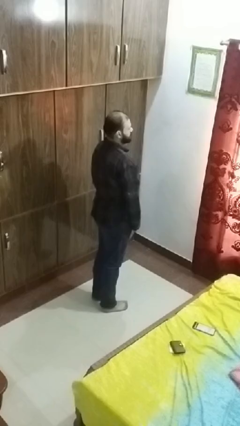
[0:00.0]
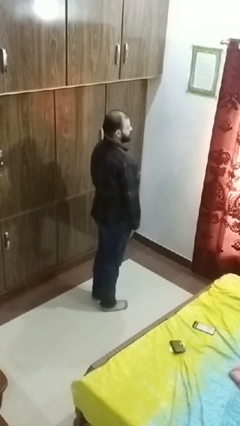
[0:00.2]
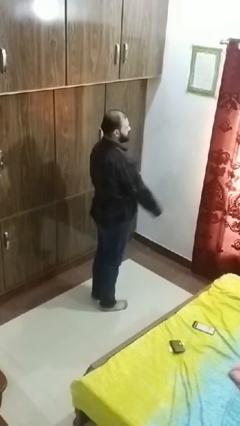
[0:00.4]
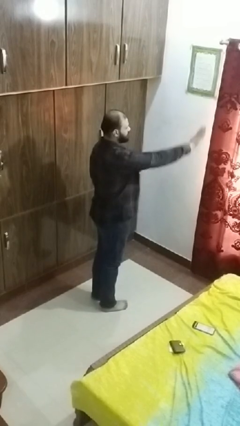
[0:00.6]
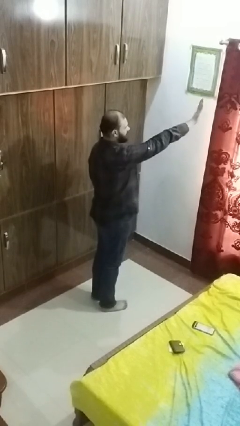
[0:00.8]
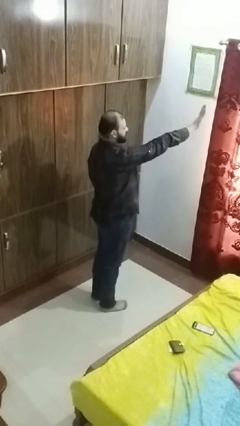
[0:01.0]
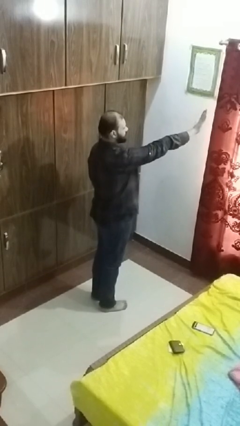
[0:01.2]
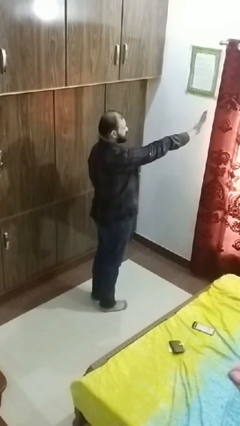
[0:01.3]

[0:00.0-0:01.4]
person gestures stop

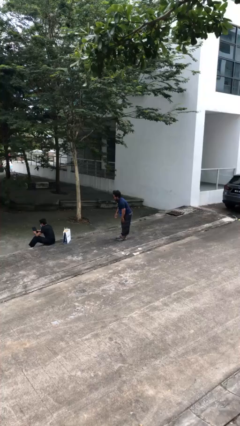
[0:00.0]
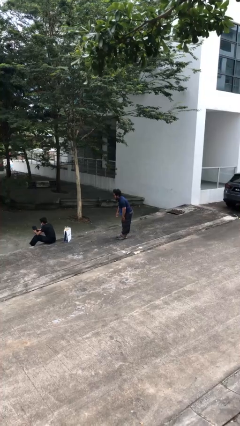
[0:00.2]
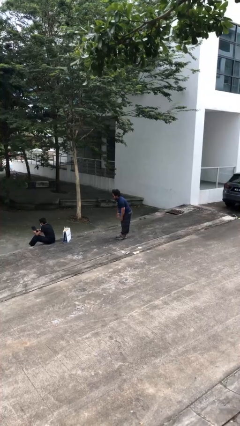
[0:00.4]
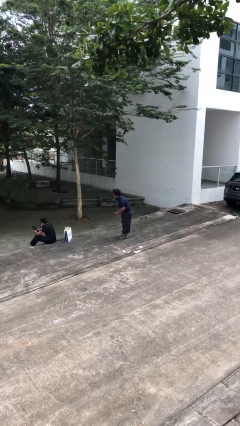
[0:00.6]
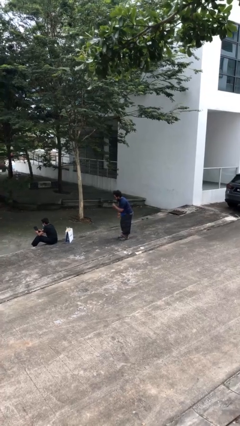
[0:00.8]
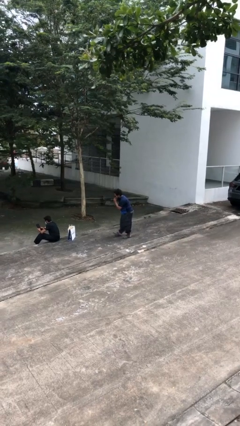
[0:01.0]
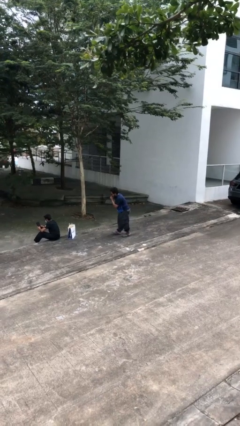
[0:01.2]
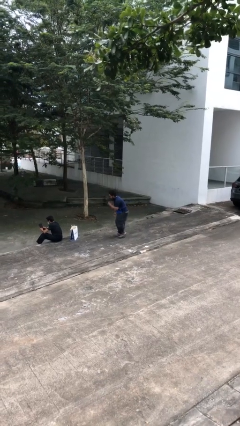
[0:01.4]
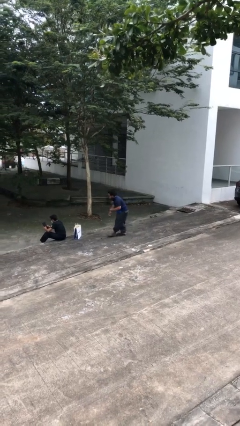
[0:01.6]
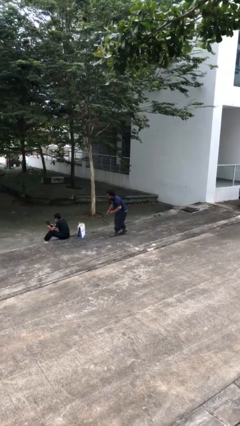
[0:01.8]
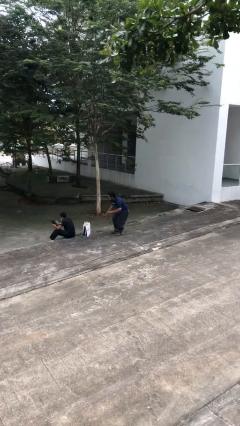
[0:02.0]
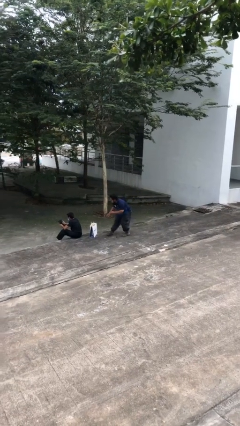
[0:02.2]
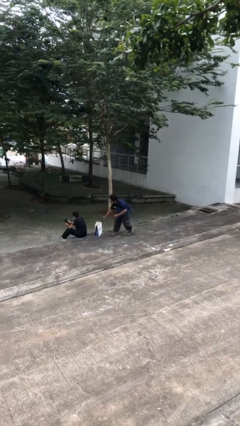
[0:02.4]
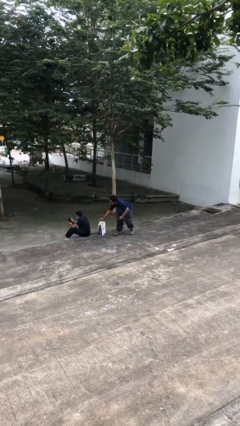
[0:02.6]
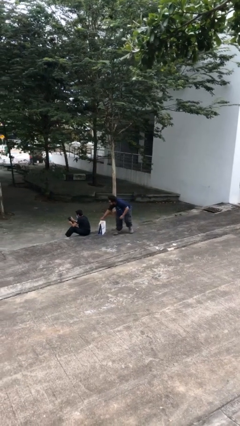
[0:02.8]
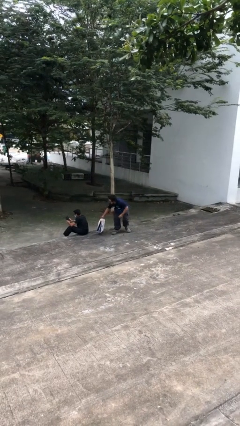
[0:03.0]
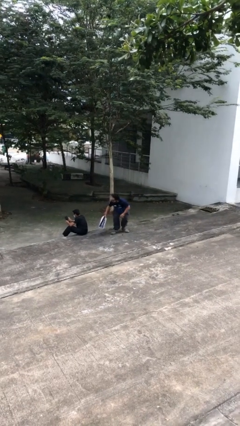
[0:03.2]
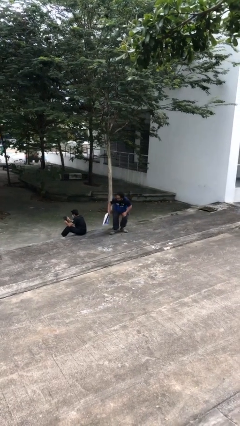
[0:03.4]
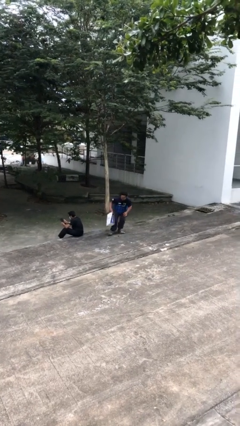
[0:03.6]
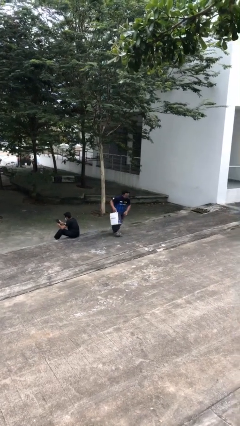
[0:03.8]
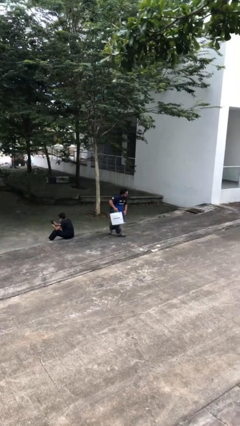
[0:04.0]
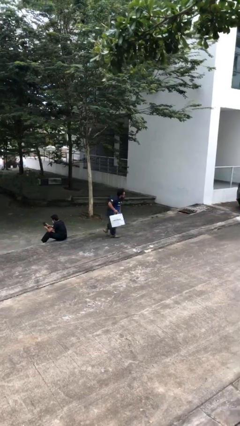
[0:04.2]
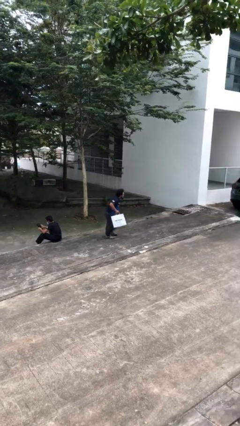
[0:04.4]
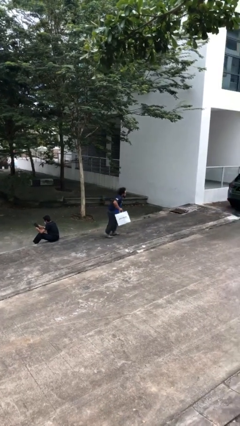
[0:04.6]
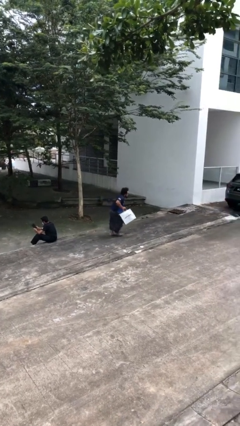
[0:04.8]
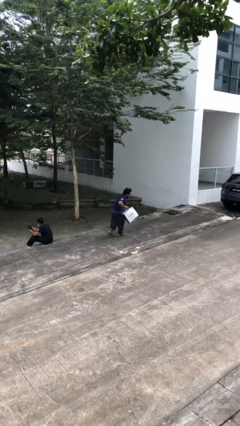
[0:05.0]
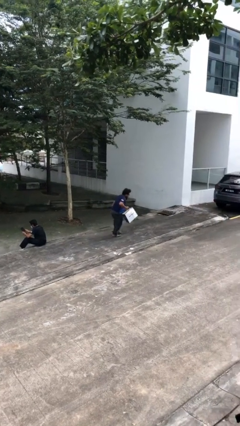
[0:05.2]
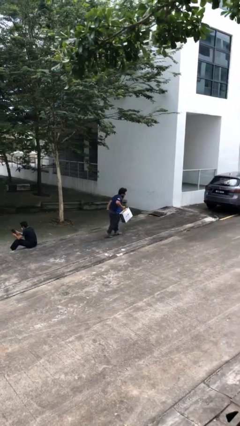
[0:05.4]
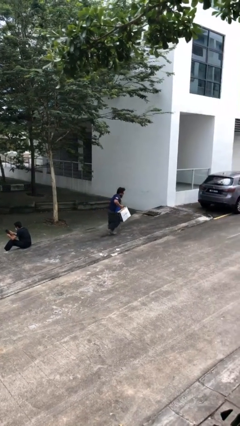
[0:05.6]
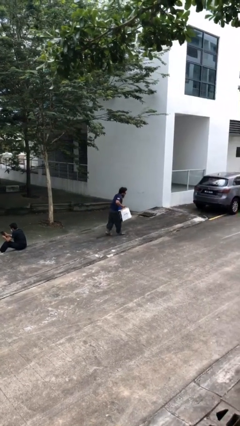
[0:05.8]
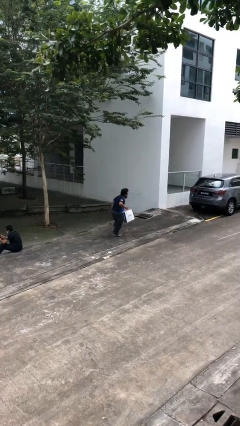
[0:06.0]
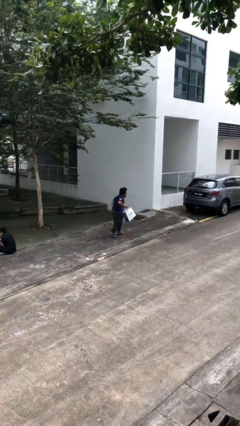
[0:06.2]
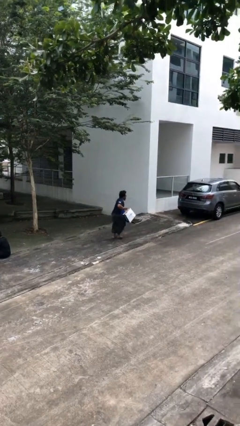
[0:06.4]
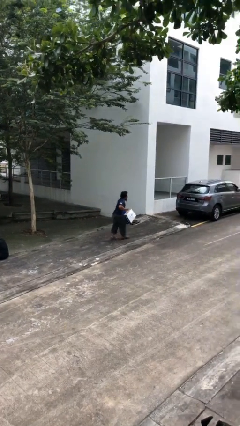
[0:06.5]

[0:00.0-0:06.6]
person steals object from person

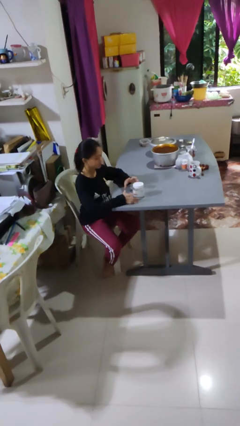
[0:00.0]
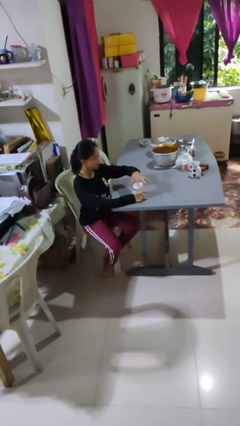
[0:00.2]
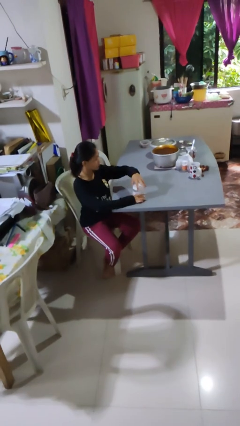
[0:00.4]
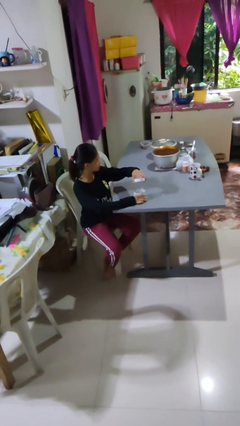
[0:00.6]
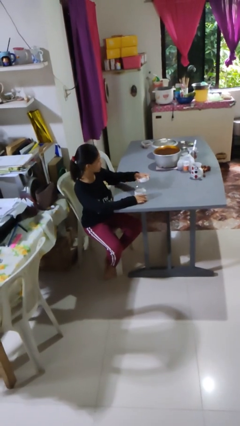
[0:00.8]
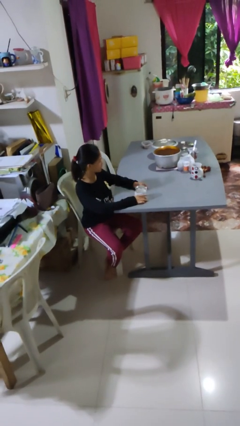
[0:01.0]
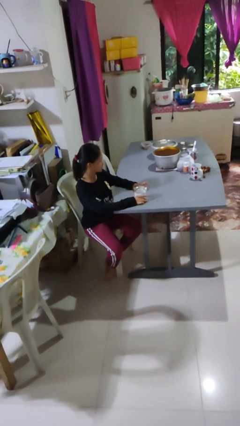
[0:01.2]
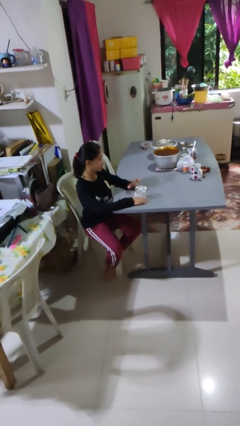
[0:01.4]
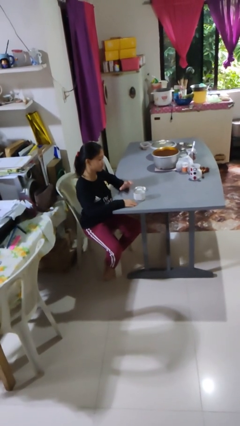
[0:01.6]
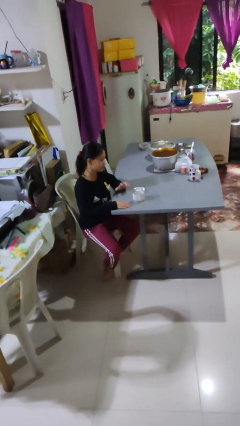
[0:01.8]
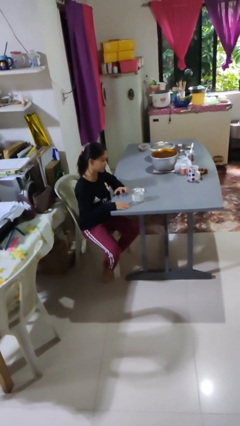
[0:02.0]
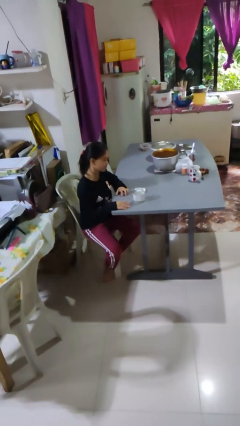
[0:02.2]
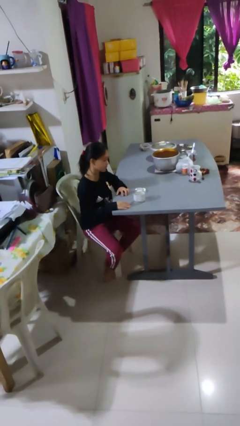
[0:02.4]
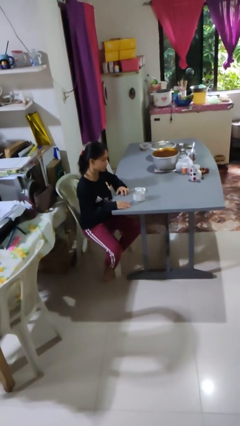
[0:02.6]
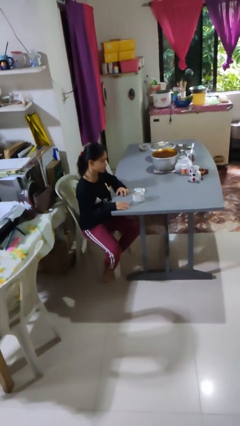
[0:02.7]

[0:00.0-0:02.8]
person opens jar

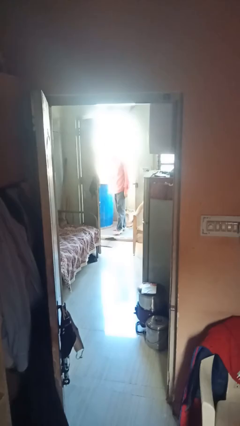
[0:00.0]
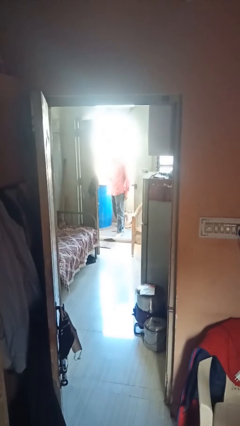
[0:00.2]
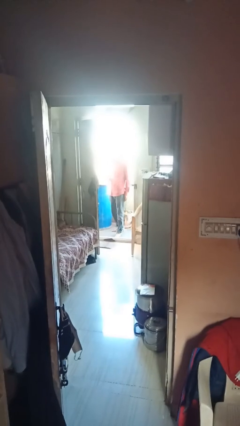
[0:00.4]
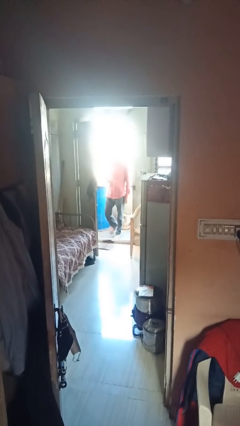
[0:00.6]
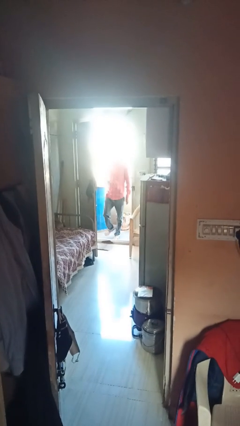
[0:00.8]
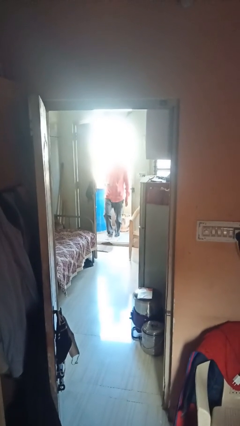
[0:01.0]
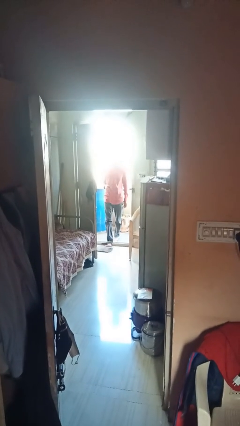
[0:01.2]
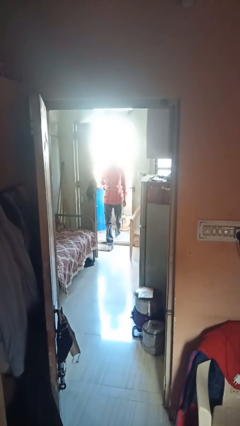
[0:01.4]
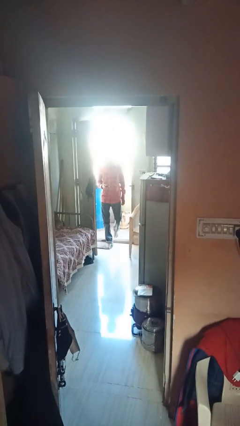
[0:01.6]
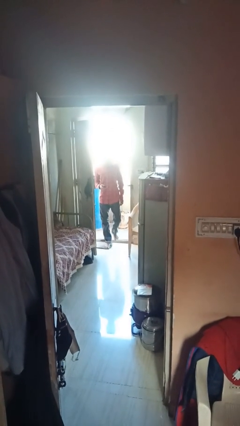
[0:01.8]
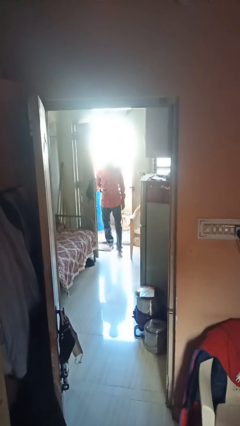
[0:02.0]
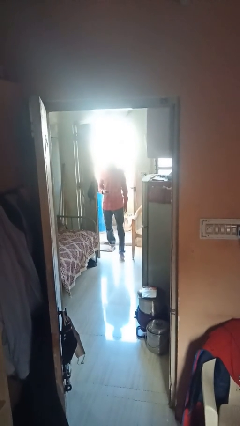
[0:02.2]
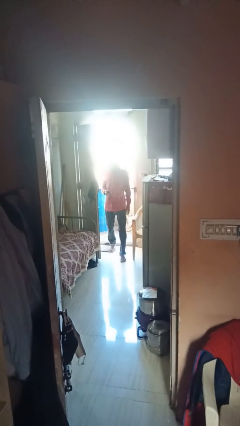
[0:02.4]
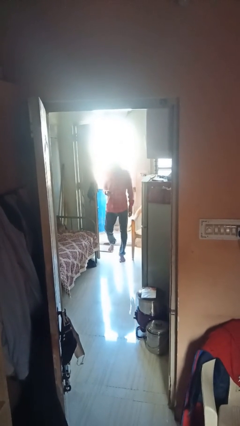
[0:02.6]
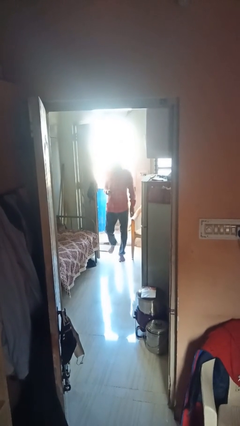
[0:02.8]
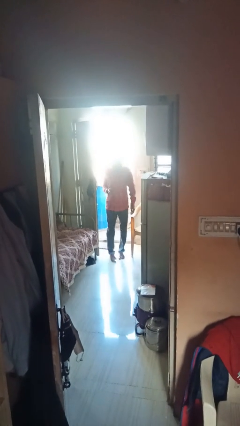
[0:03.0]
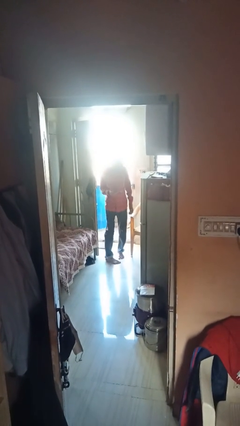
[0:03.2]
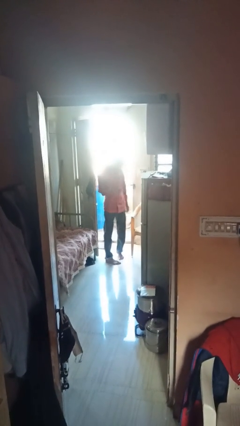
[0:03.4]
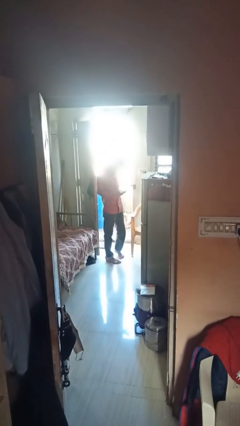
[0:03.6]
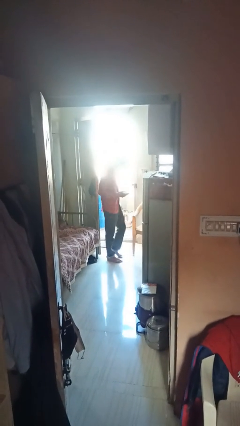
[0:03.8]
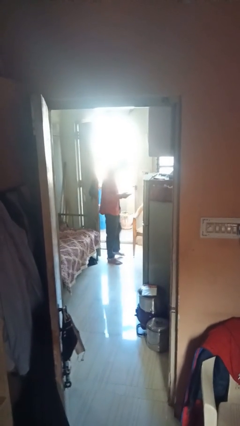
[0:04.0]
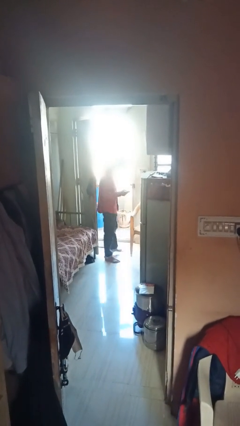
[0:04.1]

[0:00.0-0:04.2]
person enters scene through structure

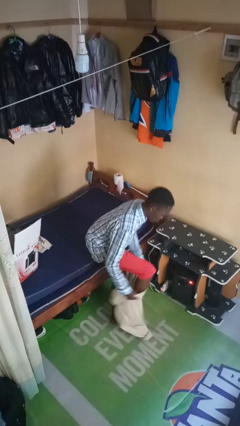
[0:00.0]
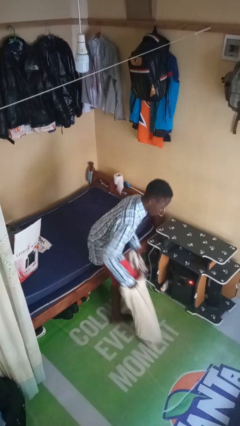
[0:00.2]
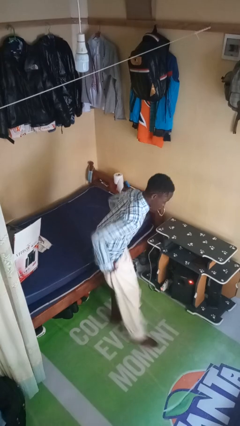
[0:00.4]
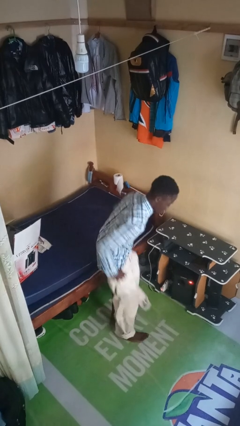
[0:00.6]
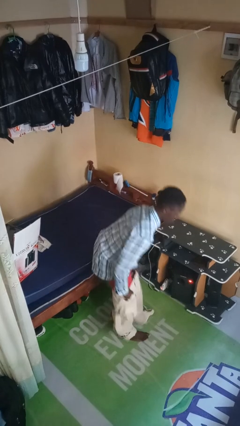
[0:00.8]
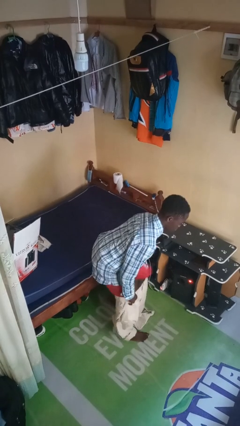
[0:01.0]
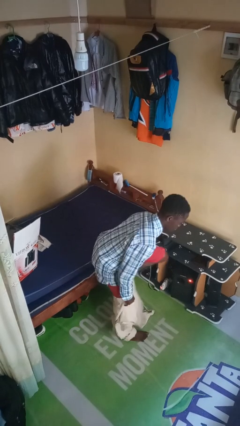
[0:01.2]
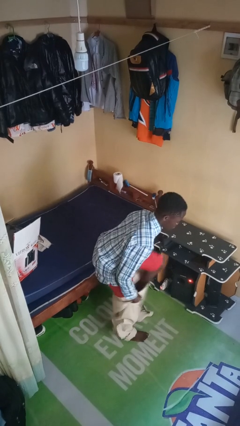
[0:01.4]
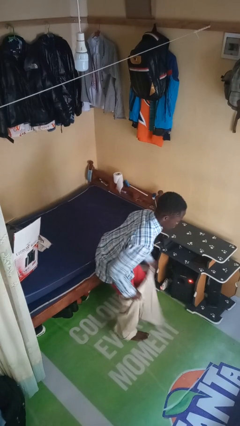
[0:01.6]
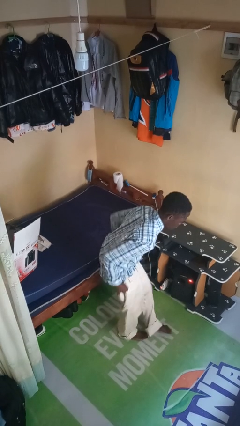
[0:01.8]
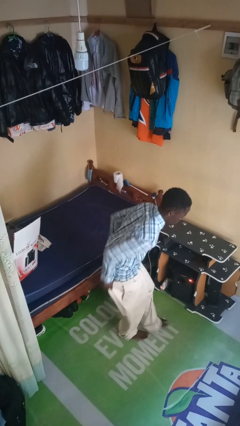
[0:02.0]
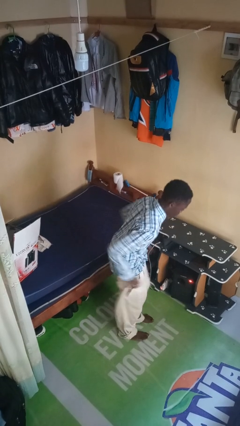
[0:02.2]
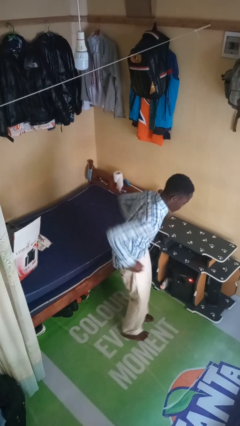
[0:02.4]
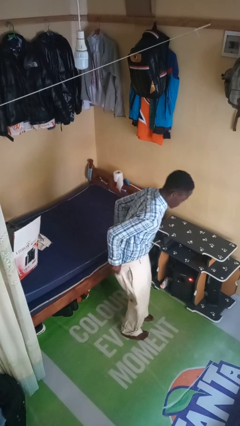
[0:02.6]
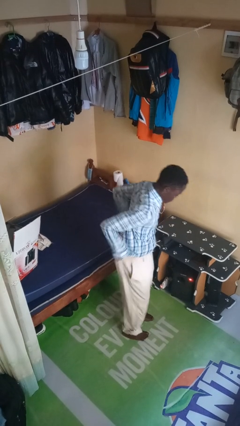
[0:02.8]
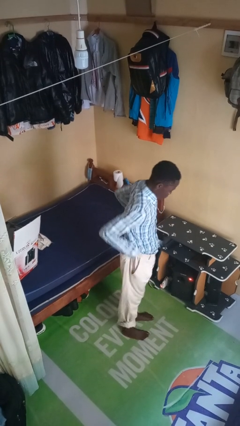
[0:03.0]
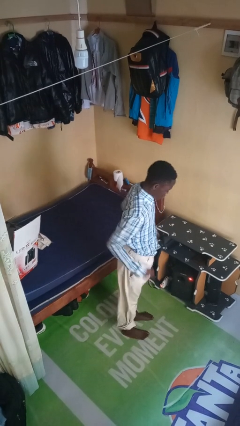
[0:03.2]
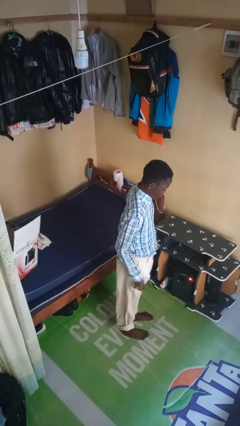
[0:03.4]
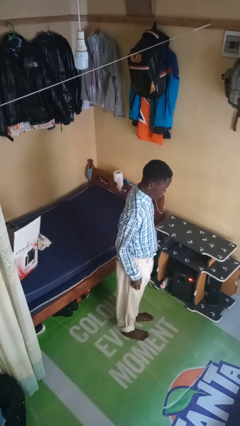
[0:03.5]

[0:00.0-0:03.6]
person puts on pants
